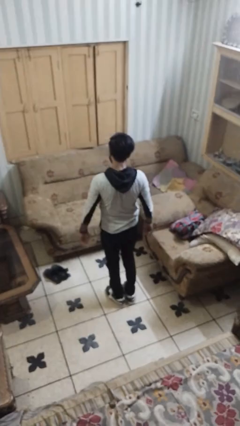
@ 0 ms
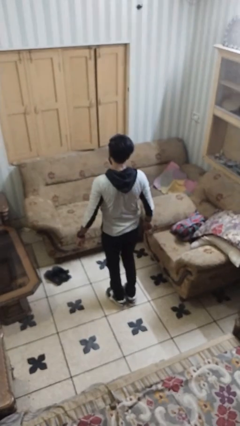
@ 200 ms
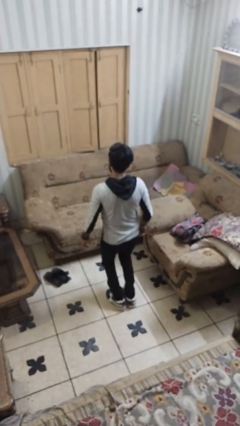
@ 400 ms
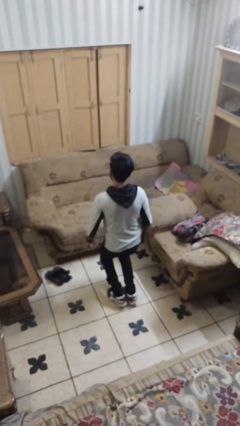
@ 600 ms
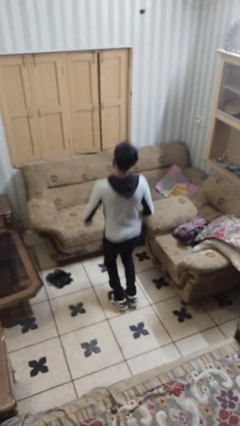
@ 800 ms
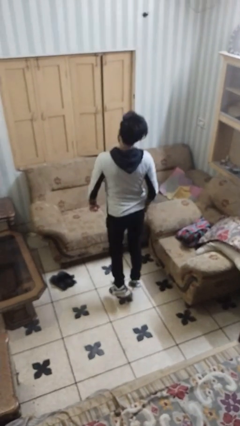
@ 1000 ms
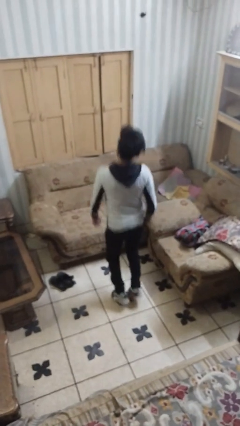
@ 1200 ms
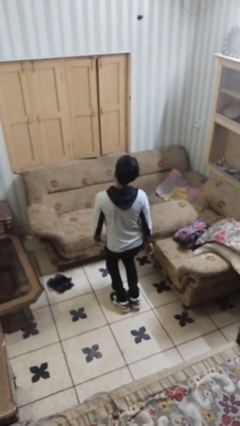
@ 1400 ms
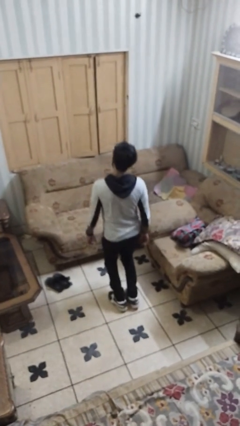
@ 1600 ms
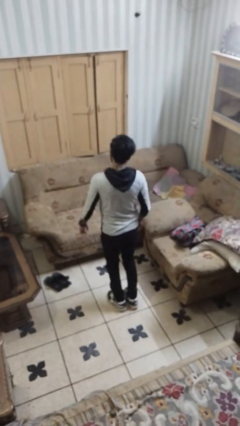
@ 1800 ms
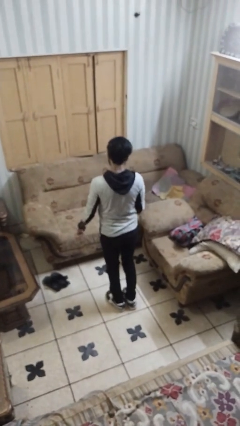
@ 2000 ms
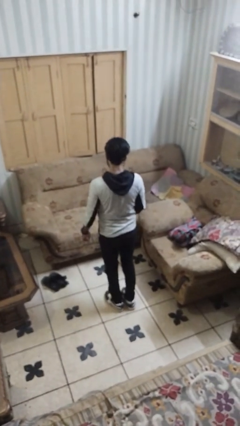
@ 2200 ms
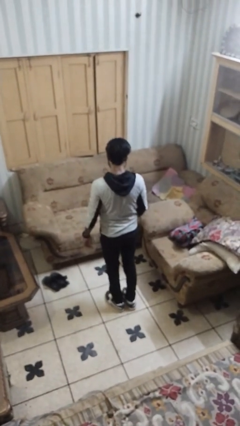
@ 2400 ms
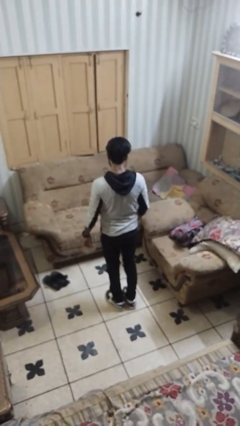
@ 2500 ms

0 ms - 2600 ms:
person jumps

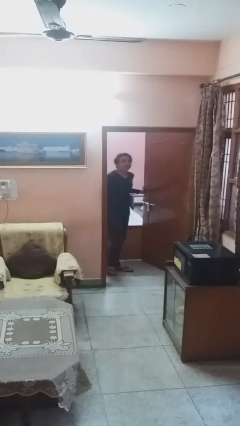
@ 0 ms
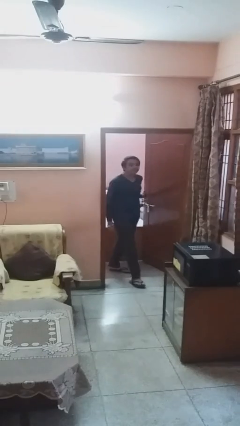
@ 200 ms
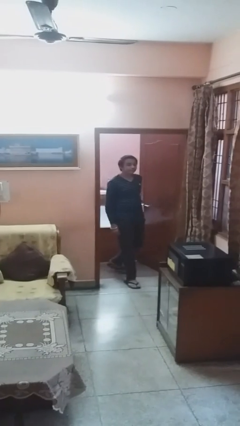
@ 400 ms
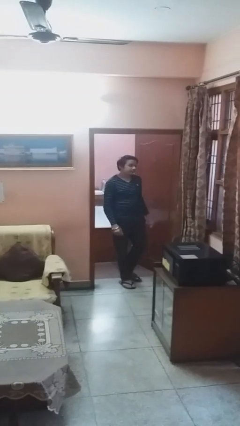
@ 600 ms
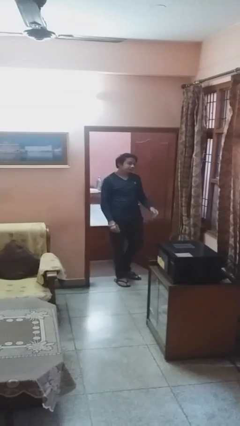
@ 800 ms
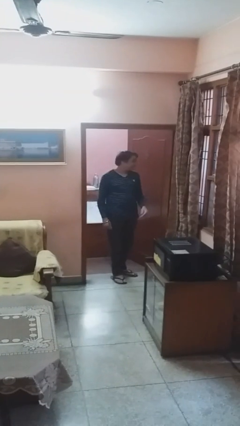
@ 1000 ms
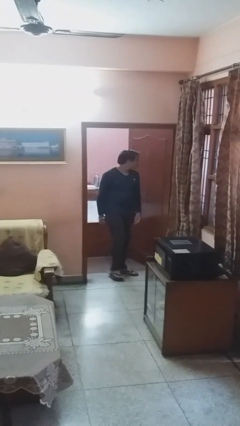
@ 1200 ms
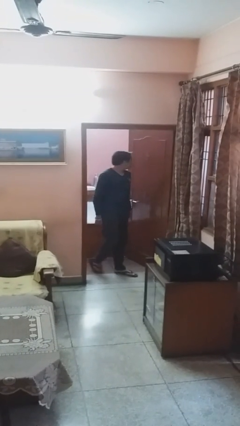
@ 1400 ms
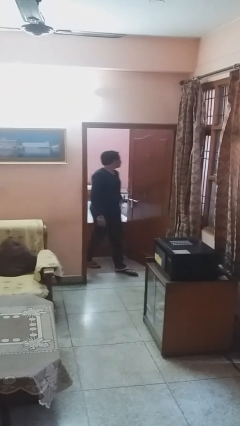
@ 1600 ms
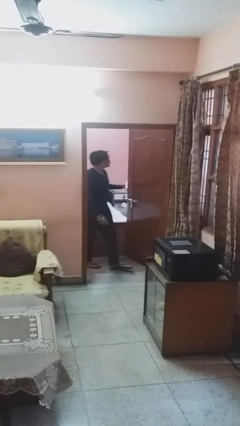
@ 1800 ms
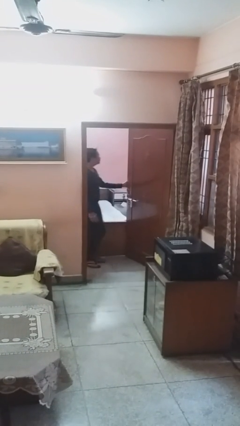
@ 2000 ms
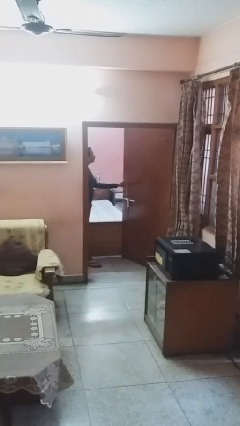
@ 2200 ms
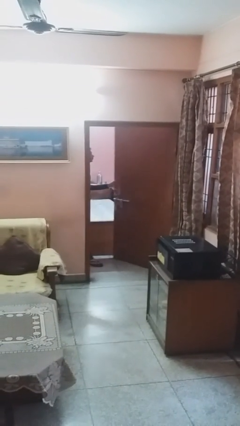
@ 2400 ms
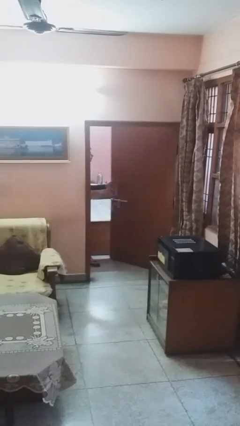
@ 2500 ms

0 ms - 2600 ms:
person opens facility door

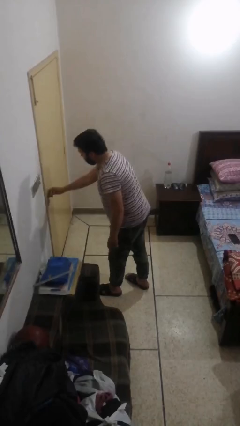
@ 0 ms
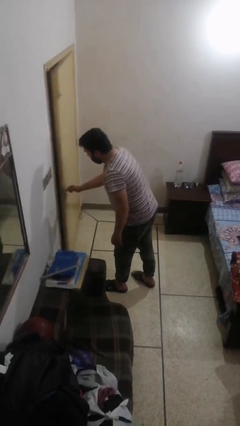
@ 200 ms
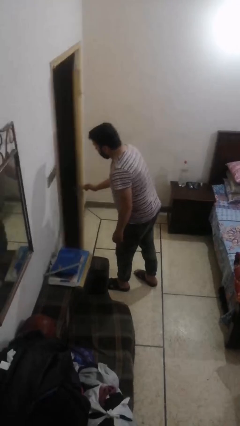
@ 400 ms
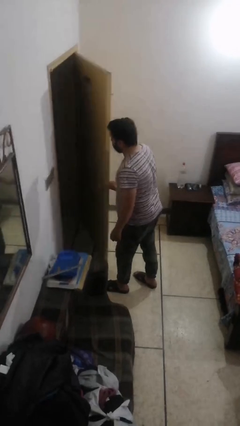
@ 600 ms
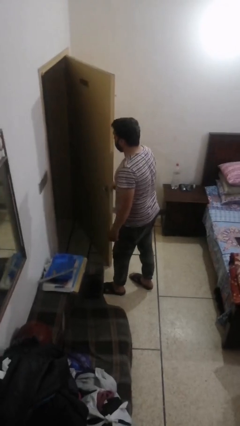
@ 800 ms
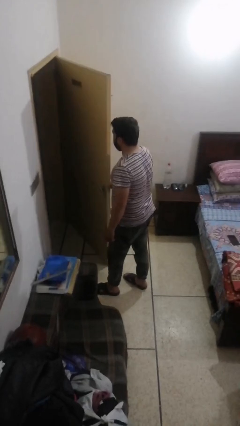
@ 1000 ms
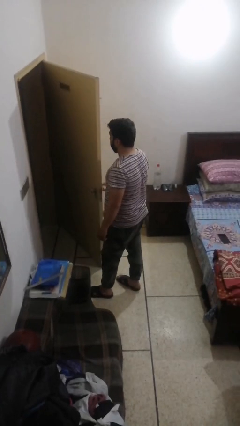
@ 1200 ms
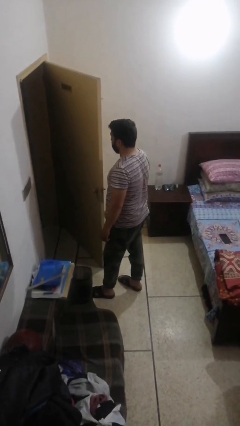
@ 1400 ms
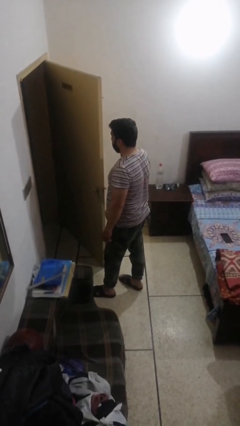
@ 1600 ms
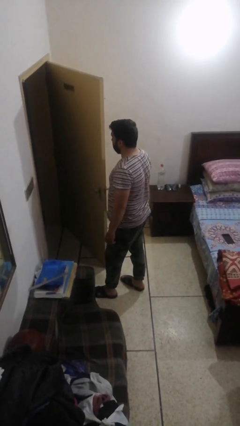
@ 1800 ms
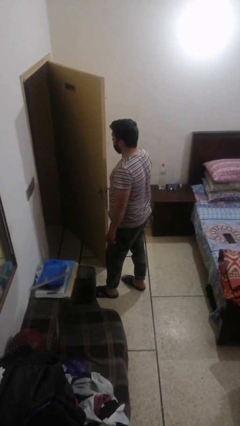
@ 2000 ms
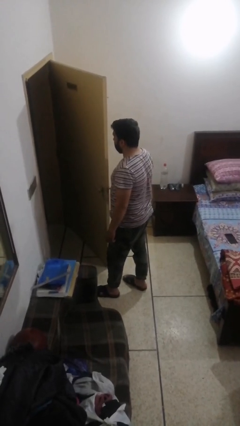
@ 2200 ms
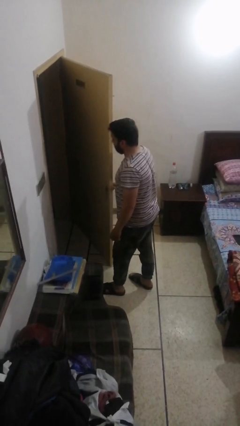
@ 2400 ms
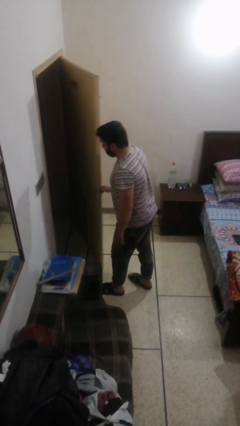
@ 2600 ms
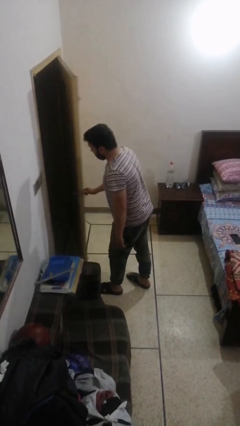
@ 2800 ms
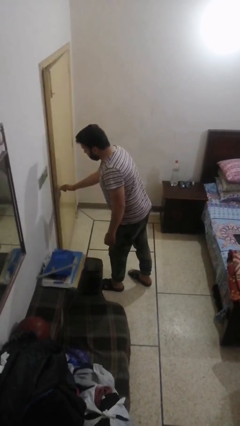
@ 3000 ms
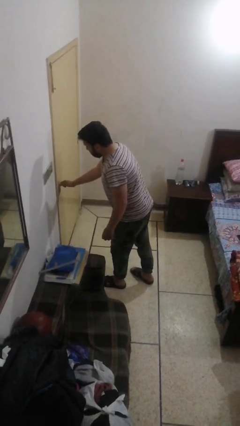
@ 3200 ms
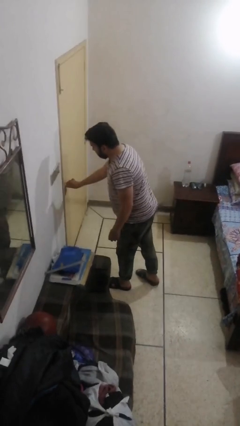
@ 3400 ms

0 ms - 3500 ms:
person closes facility door

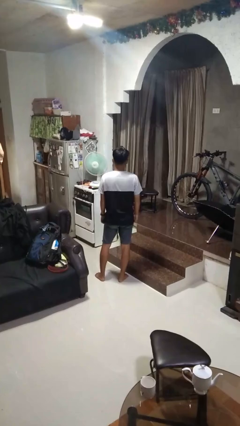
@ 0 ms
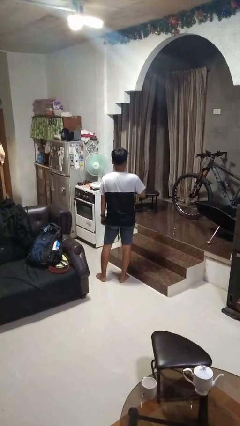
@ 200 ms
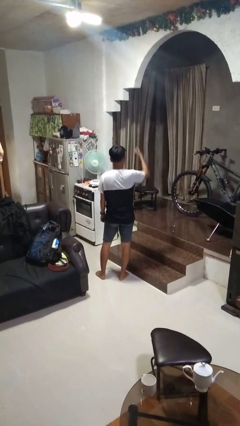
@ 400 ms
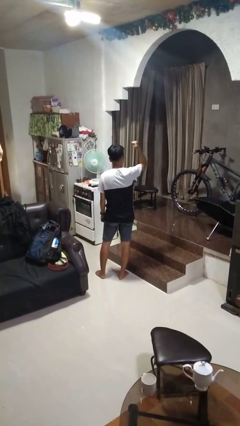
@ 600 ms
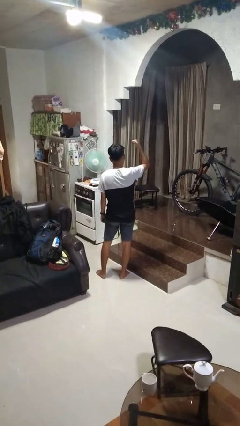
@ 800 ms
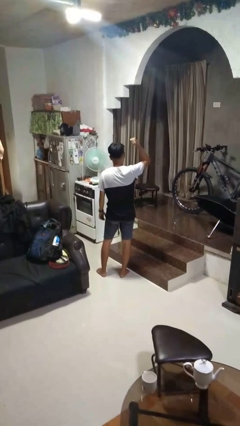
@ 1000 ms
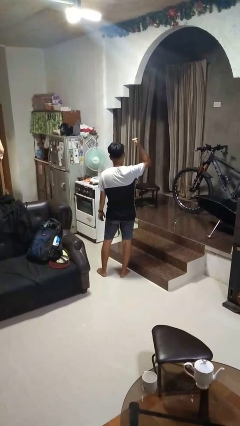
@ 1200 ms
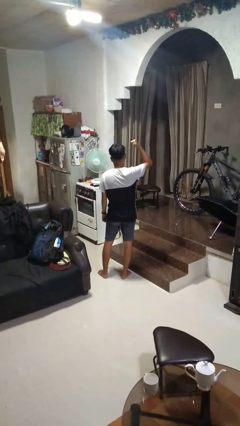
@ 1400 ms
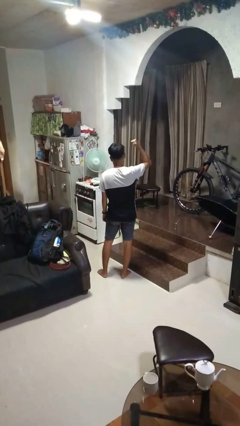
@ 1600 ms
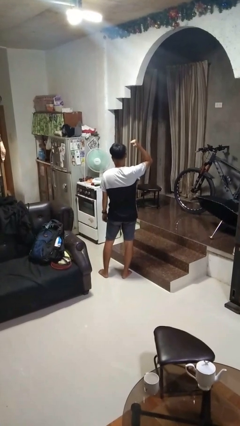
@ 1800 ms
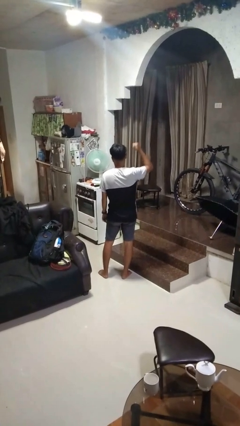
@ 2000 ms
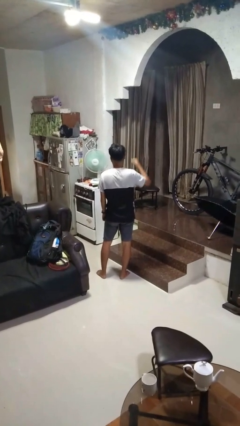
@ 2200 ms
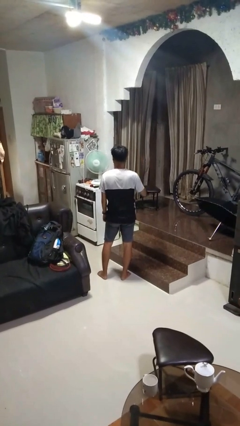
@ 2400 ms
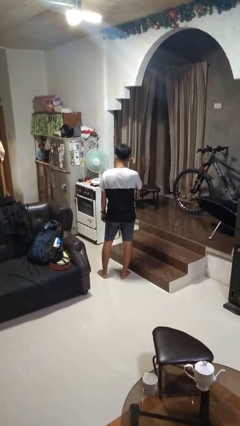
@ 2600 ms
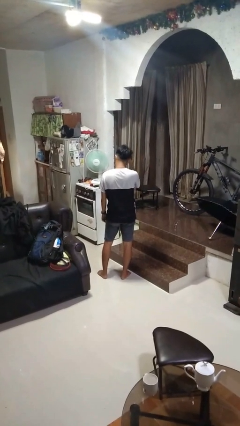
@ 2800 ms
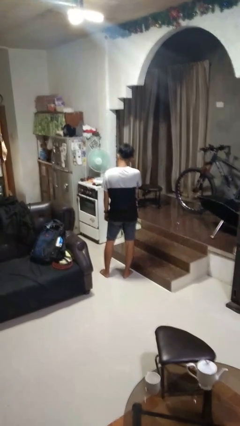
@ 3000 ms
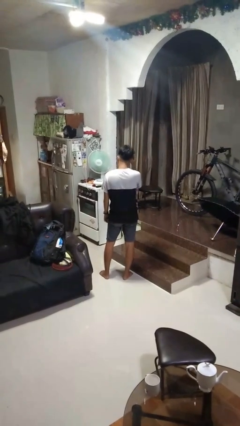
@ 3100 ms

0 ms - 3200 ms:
person gestures behind me

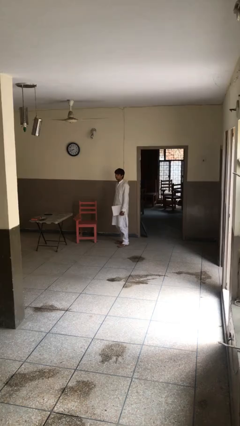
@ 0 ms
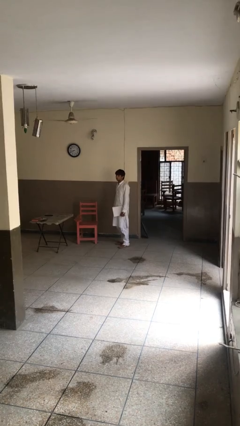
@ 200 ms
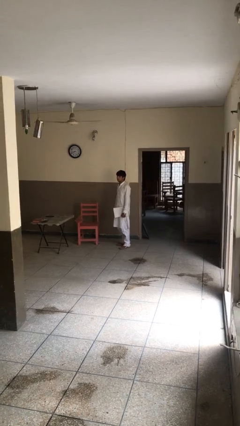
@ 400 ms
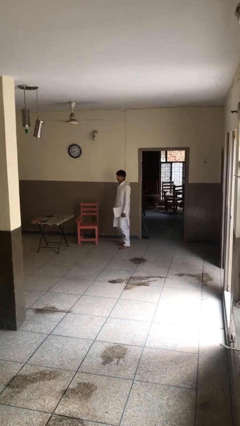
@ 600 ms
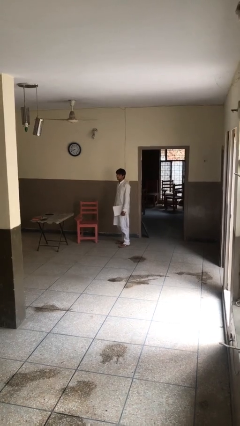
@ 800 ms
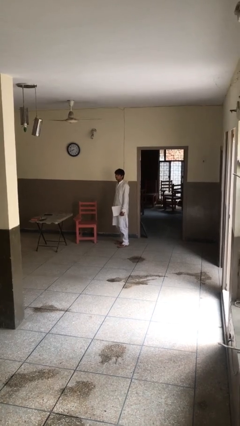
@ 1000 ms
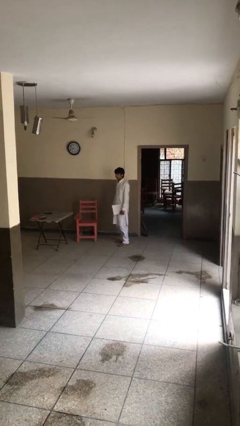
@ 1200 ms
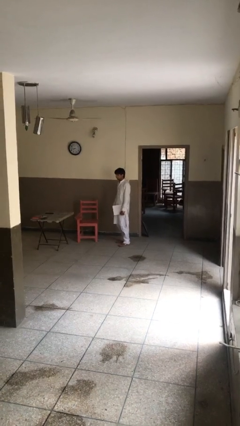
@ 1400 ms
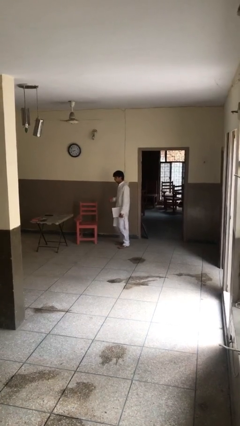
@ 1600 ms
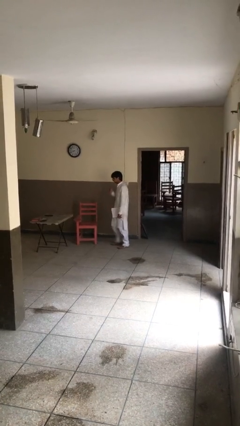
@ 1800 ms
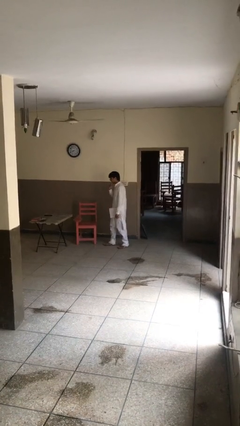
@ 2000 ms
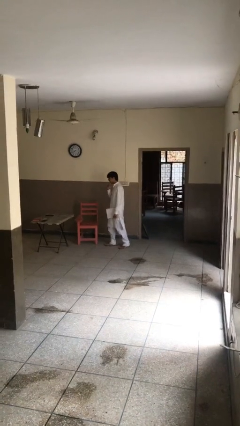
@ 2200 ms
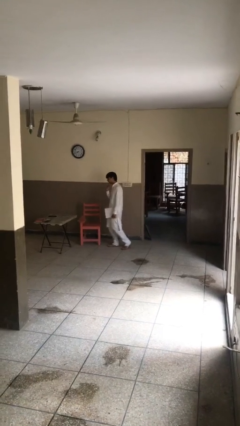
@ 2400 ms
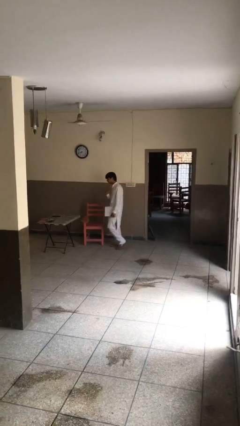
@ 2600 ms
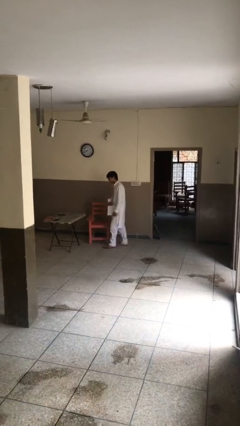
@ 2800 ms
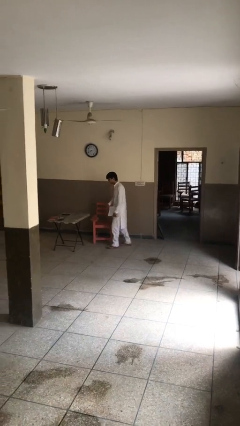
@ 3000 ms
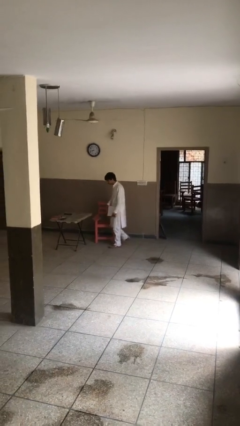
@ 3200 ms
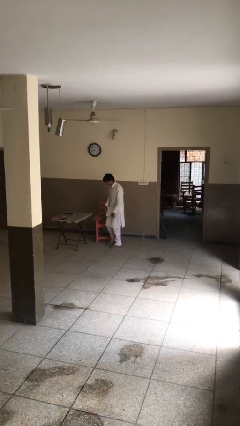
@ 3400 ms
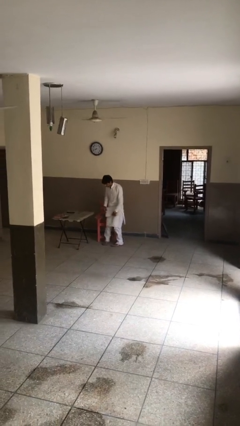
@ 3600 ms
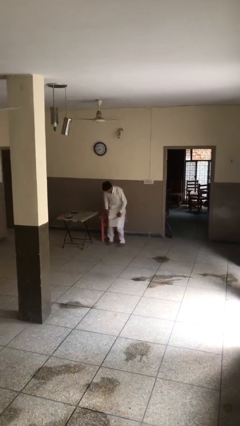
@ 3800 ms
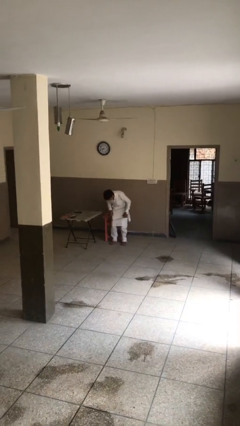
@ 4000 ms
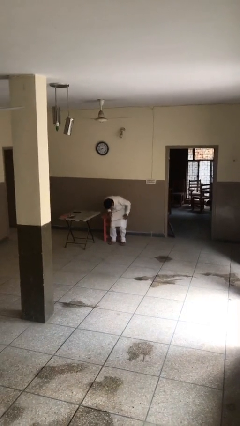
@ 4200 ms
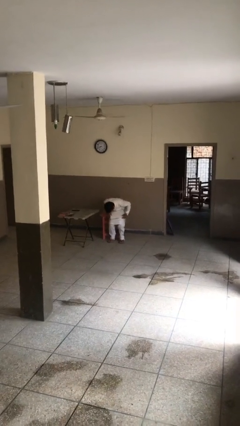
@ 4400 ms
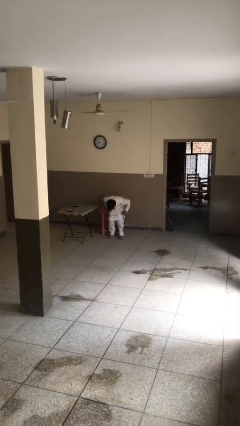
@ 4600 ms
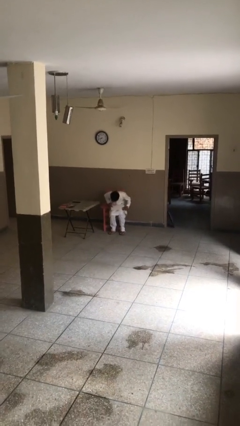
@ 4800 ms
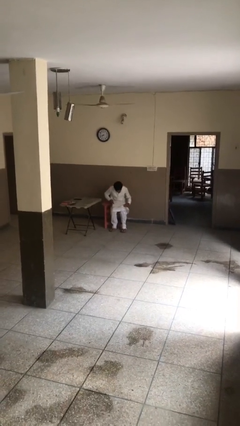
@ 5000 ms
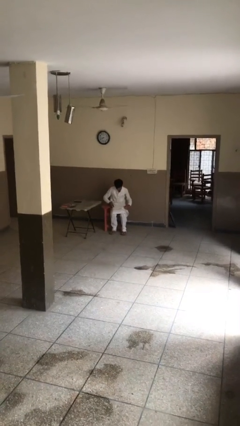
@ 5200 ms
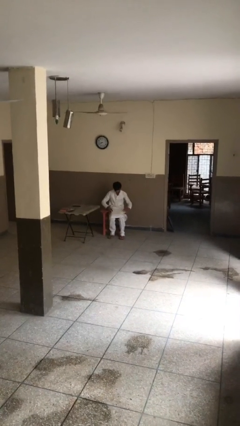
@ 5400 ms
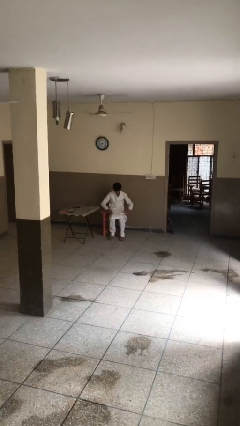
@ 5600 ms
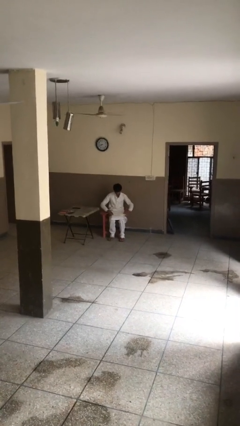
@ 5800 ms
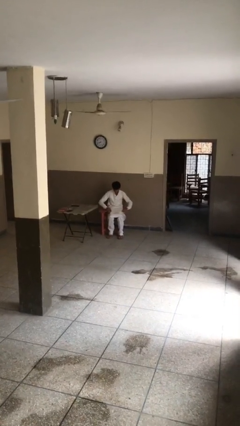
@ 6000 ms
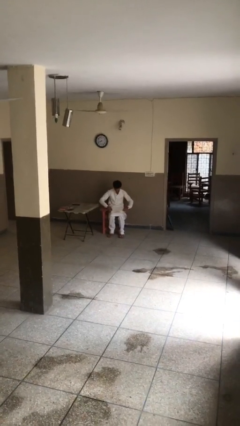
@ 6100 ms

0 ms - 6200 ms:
person sits down
